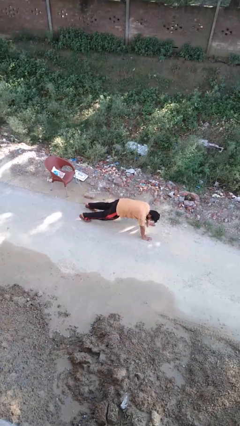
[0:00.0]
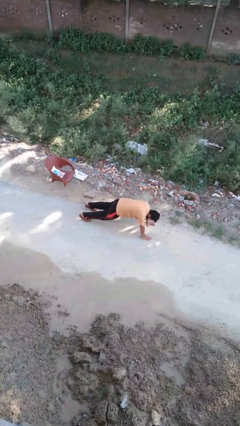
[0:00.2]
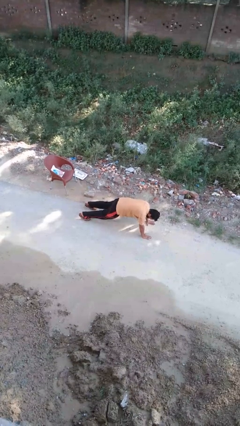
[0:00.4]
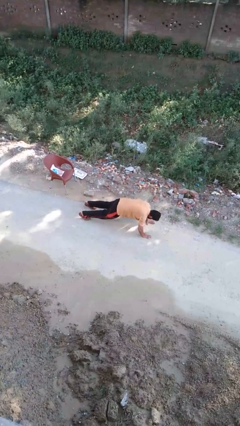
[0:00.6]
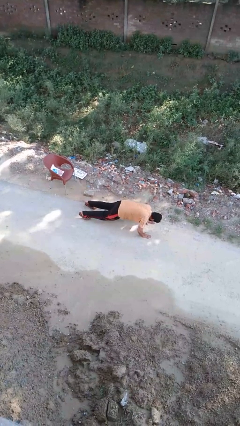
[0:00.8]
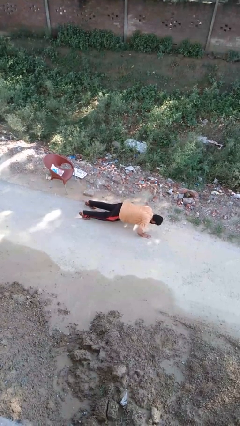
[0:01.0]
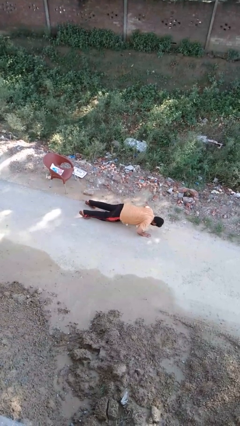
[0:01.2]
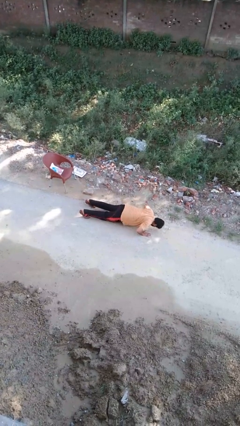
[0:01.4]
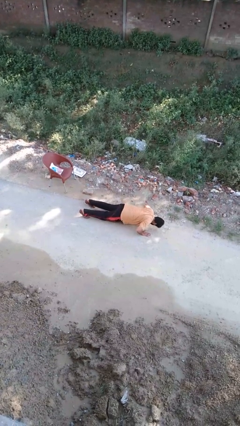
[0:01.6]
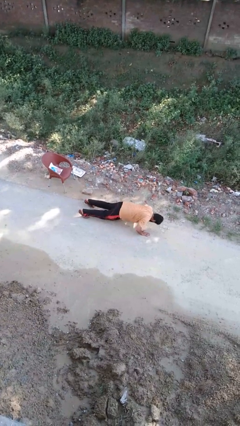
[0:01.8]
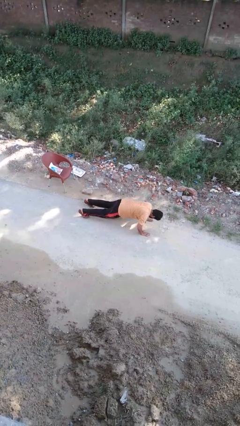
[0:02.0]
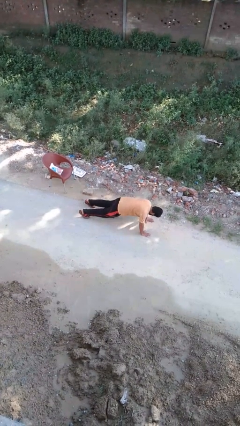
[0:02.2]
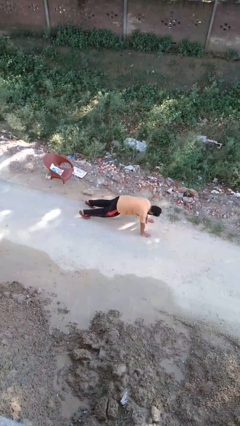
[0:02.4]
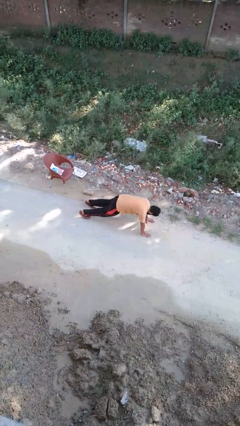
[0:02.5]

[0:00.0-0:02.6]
person exercises with pushup

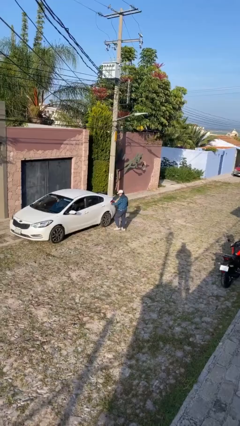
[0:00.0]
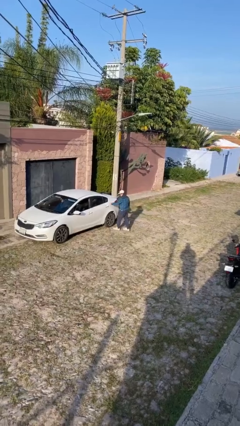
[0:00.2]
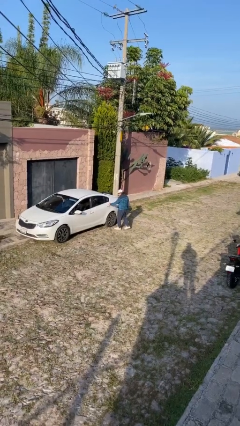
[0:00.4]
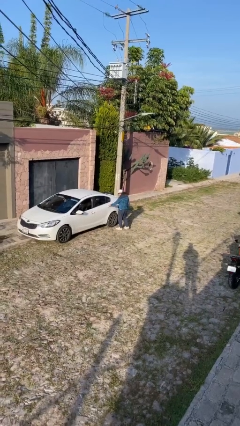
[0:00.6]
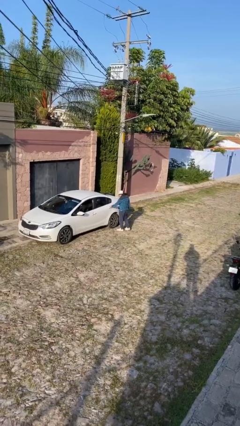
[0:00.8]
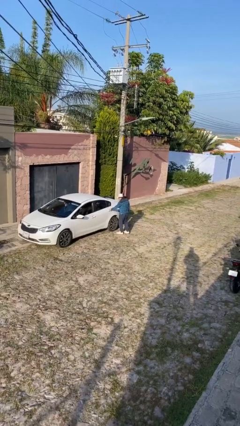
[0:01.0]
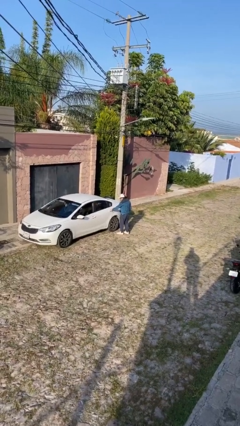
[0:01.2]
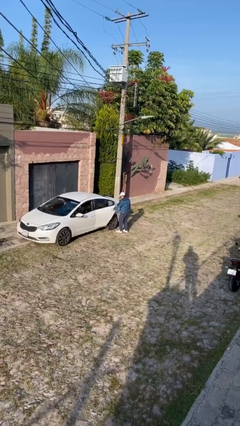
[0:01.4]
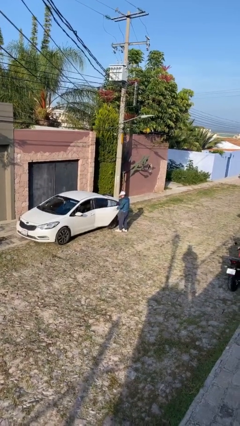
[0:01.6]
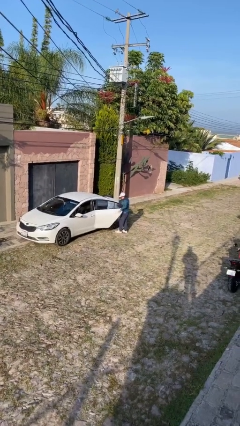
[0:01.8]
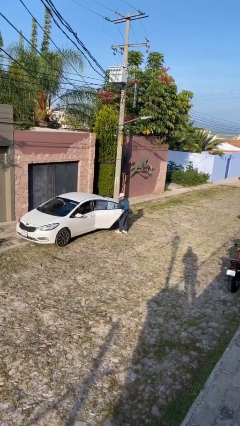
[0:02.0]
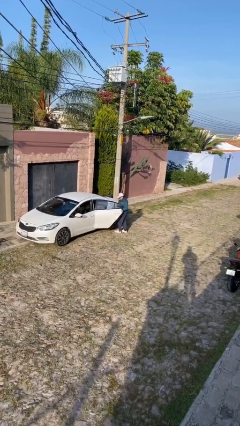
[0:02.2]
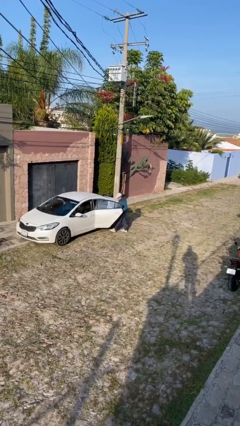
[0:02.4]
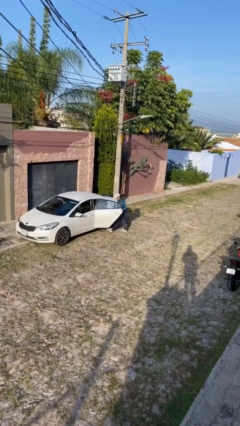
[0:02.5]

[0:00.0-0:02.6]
person opens car door

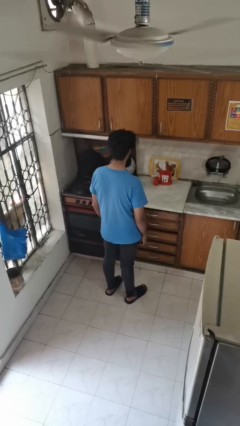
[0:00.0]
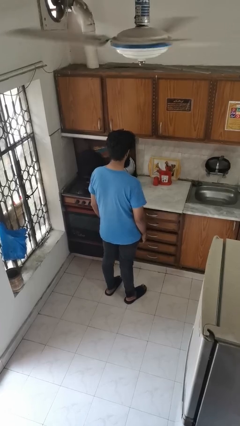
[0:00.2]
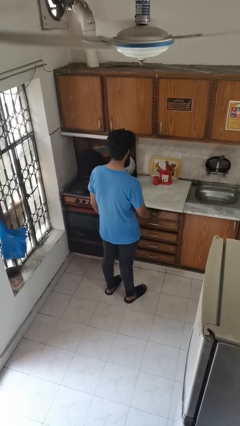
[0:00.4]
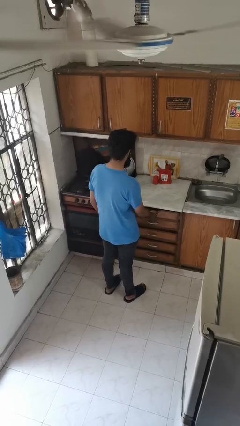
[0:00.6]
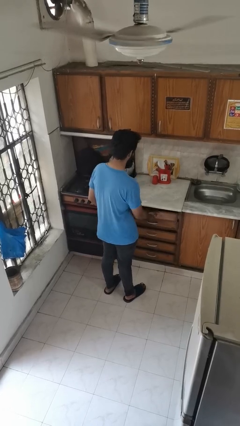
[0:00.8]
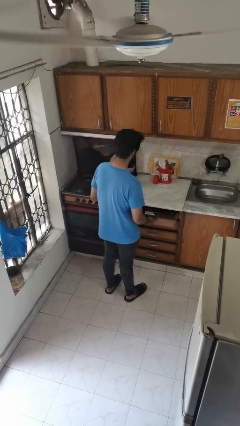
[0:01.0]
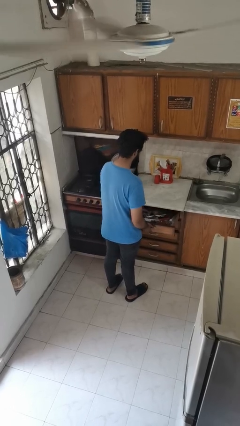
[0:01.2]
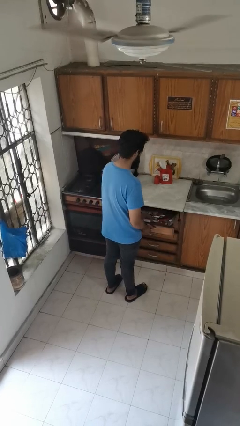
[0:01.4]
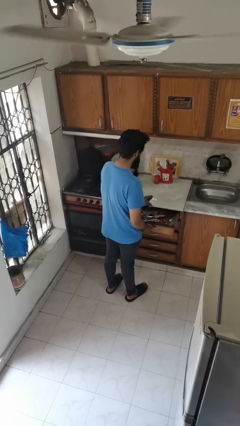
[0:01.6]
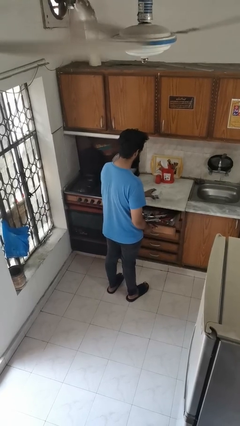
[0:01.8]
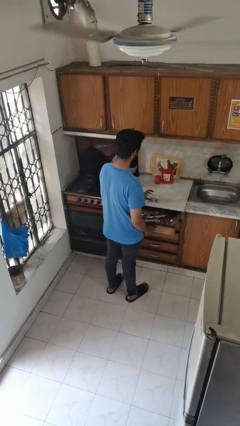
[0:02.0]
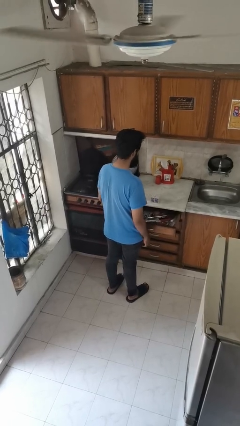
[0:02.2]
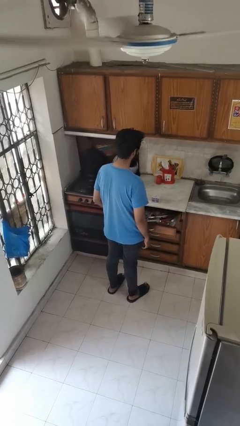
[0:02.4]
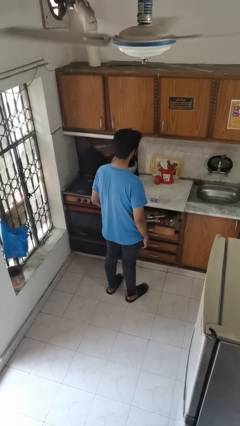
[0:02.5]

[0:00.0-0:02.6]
person takes object from kitchen drawer

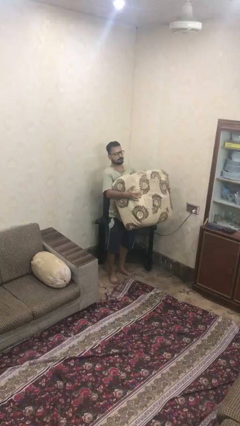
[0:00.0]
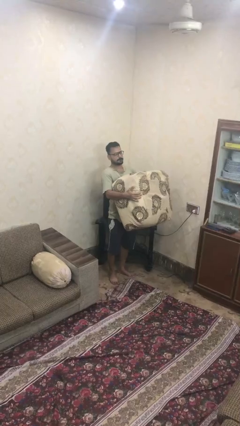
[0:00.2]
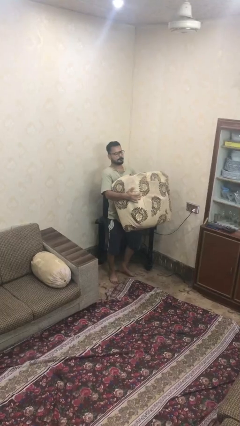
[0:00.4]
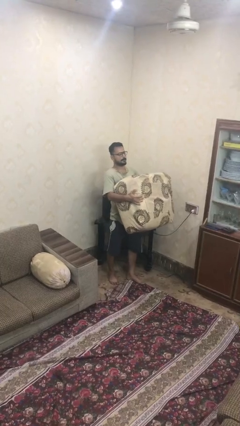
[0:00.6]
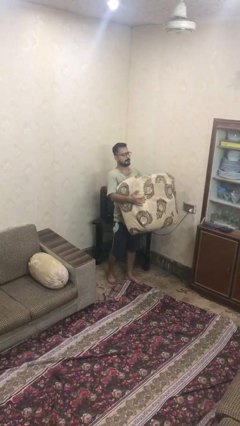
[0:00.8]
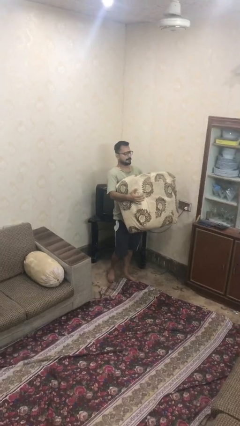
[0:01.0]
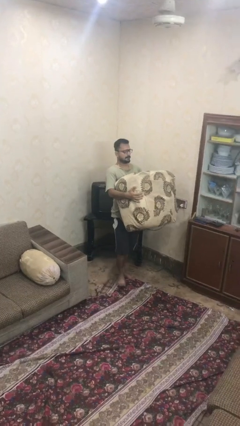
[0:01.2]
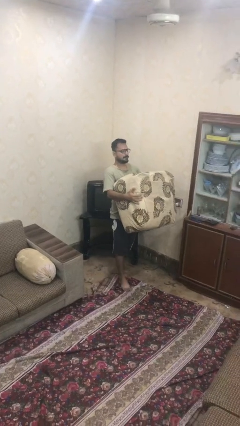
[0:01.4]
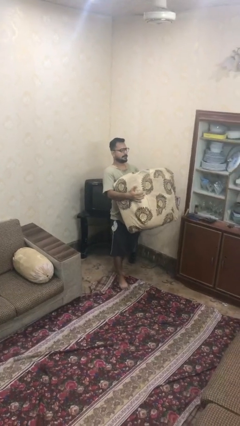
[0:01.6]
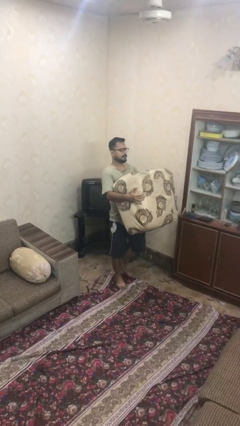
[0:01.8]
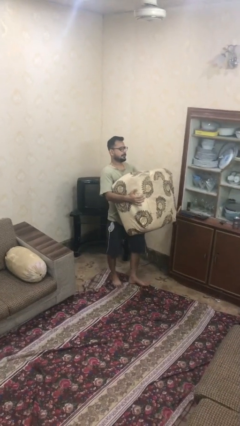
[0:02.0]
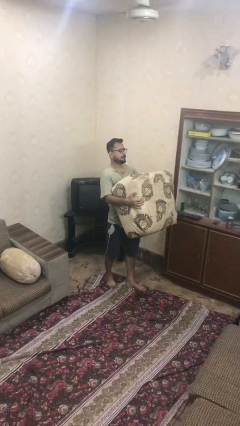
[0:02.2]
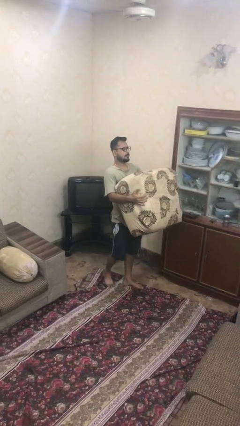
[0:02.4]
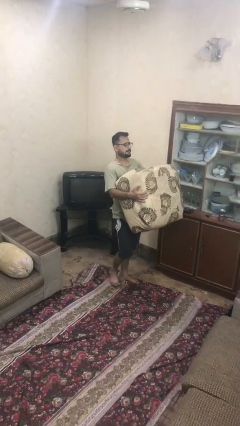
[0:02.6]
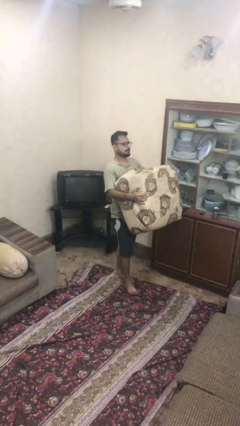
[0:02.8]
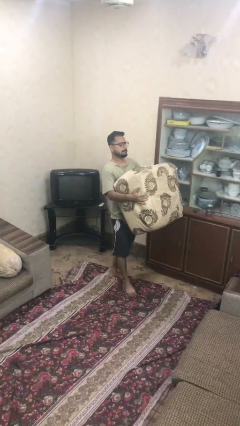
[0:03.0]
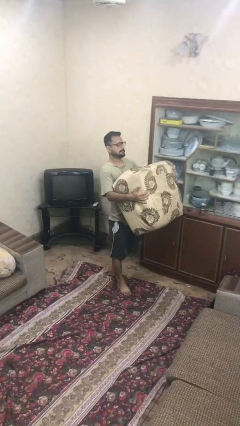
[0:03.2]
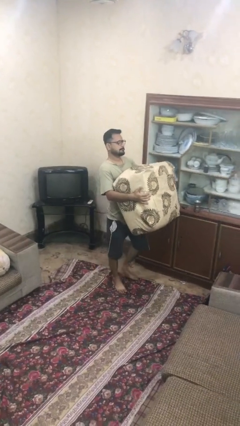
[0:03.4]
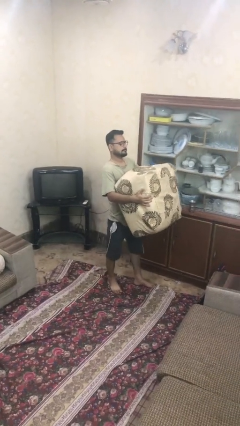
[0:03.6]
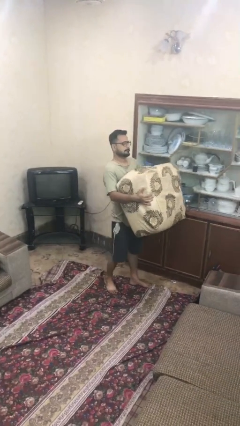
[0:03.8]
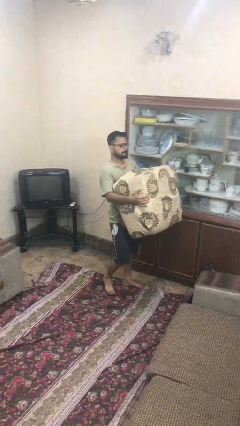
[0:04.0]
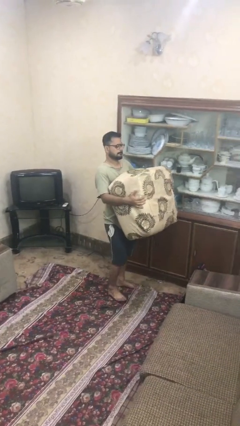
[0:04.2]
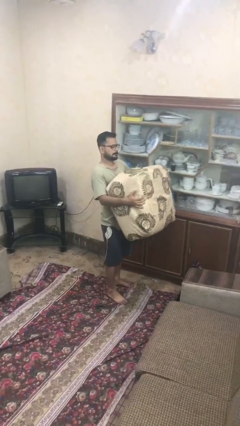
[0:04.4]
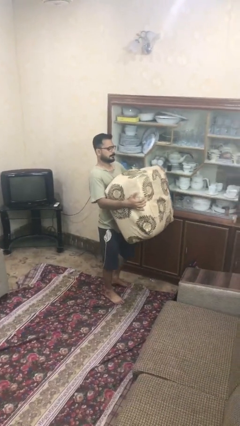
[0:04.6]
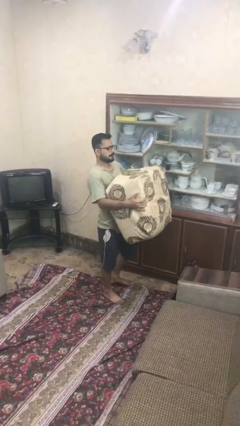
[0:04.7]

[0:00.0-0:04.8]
person carries heavy object

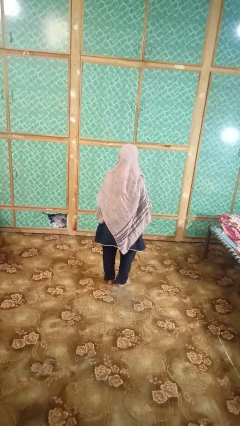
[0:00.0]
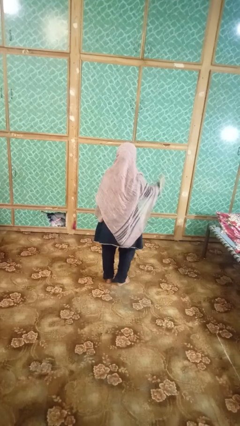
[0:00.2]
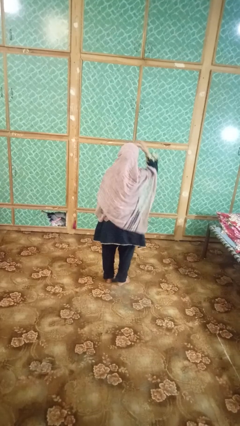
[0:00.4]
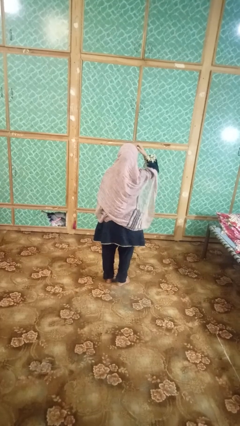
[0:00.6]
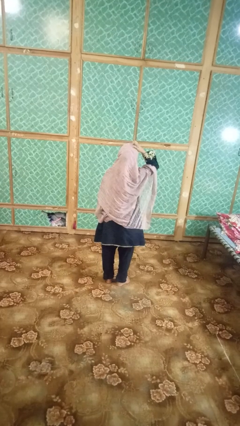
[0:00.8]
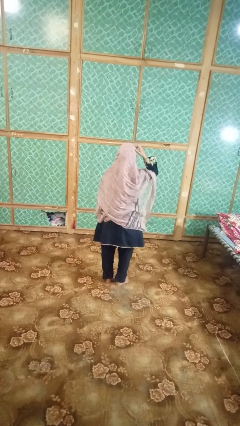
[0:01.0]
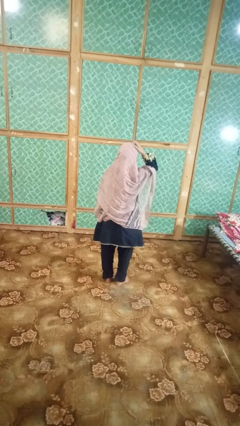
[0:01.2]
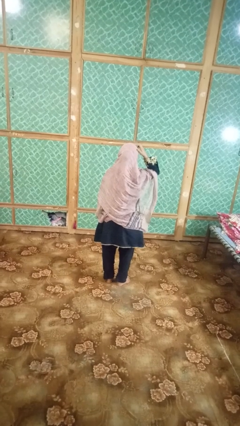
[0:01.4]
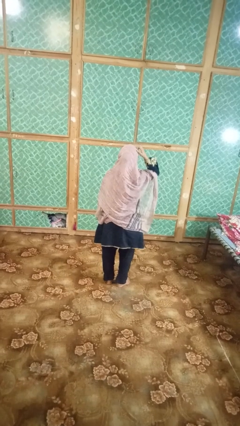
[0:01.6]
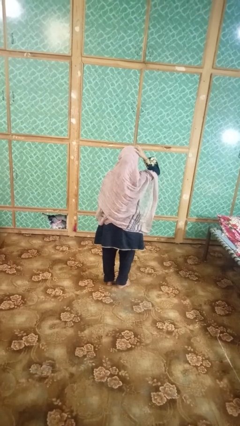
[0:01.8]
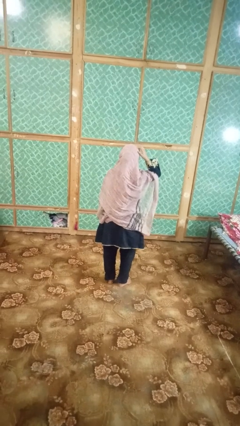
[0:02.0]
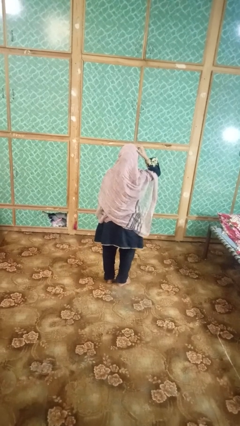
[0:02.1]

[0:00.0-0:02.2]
person strokes hair

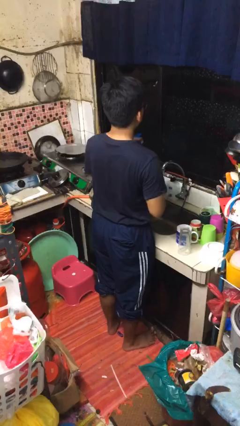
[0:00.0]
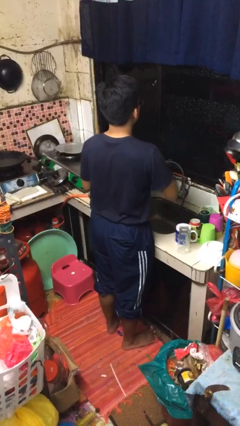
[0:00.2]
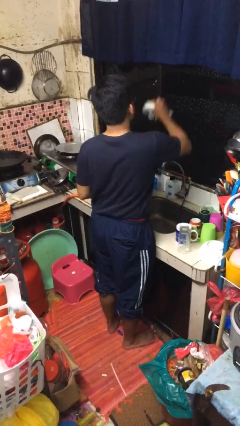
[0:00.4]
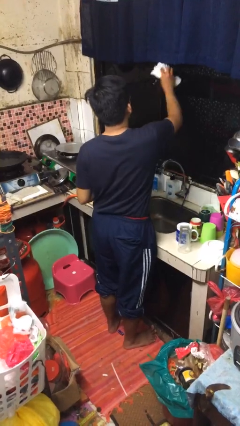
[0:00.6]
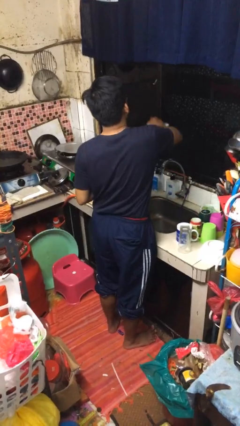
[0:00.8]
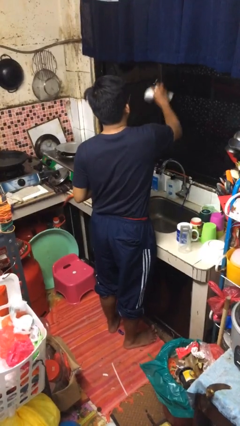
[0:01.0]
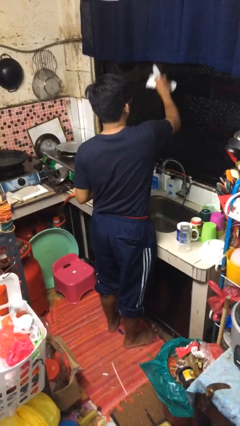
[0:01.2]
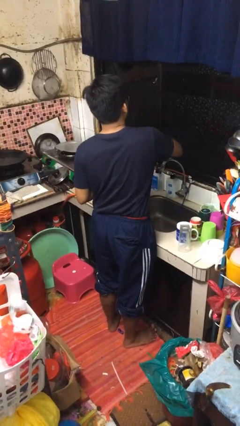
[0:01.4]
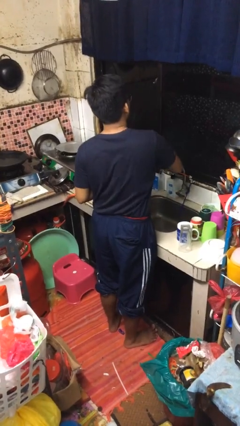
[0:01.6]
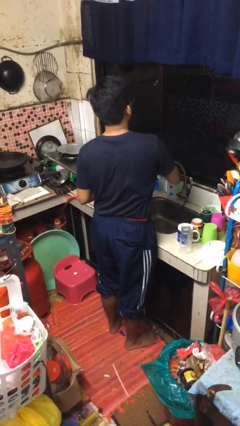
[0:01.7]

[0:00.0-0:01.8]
person washes window

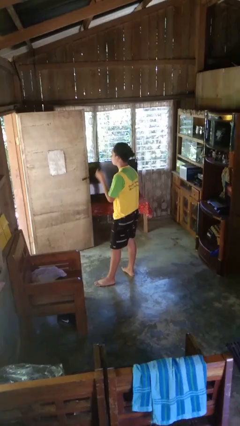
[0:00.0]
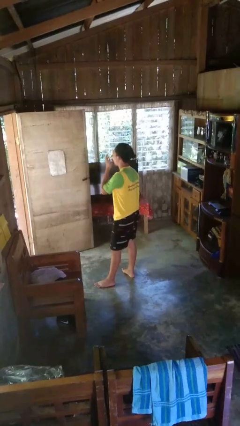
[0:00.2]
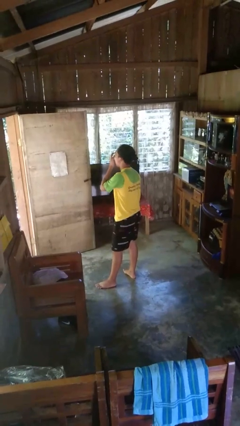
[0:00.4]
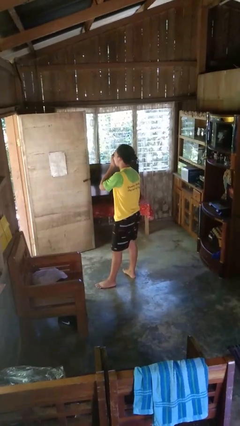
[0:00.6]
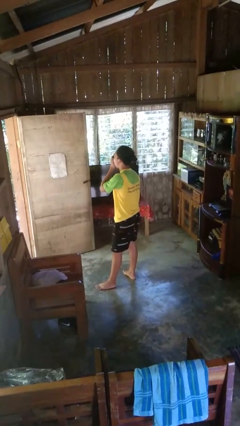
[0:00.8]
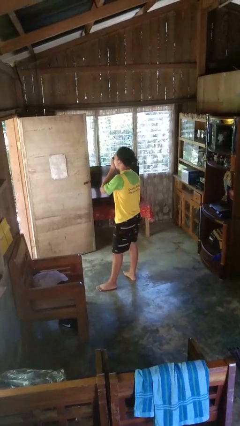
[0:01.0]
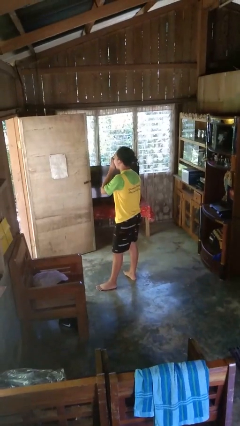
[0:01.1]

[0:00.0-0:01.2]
person yawns
